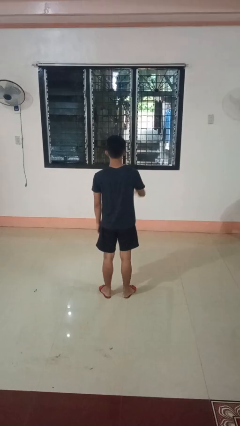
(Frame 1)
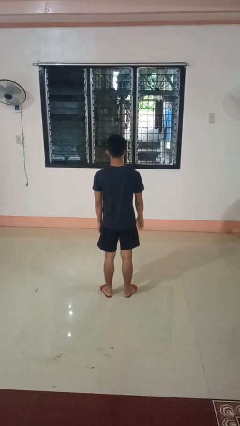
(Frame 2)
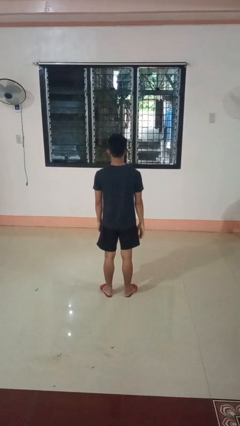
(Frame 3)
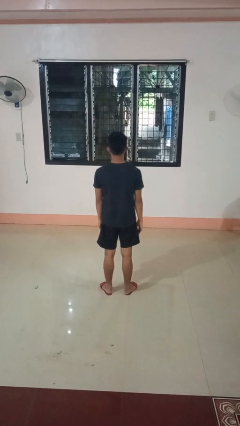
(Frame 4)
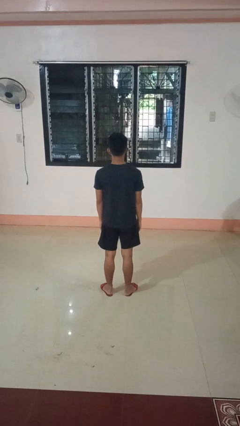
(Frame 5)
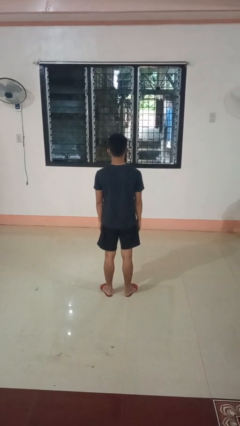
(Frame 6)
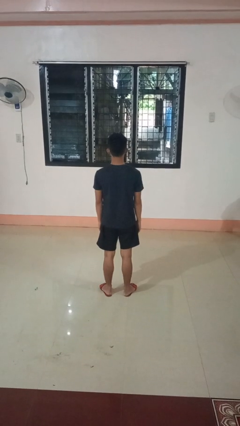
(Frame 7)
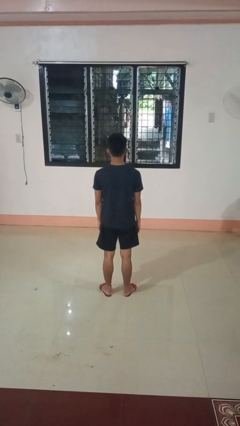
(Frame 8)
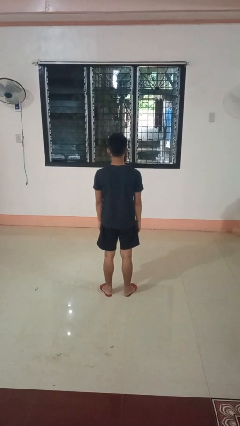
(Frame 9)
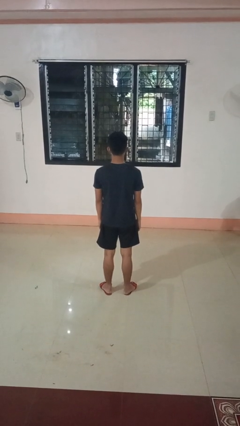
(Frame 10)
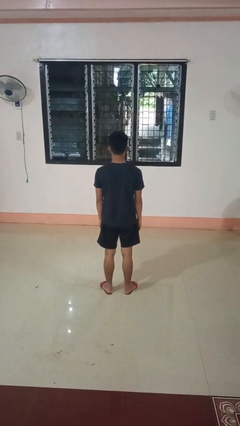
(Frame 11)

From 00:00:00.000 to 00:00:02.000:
person gestures swipe down

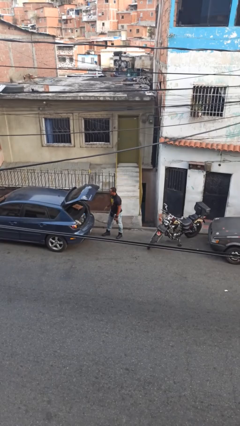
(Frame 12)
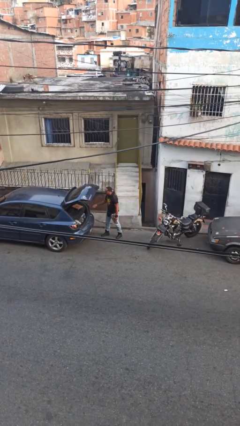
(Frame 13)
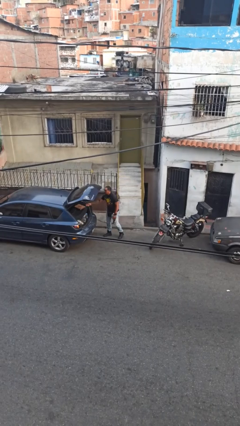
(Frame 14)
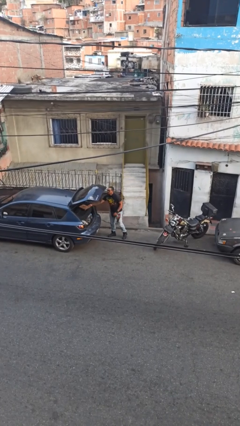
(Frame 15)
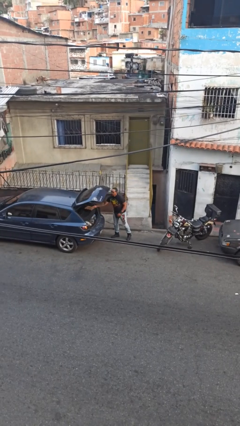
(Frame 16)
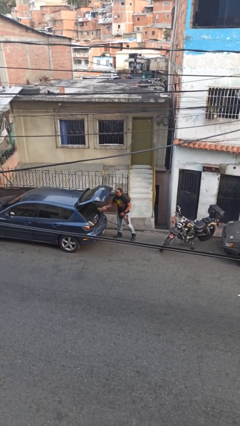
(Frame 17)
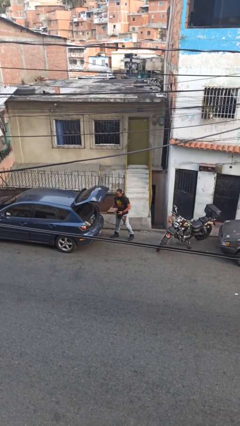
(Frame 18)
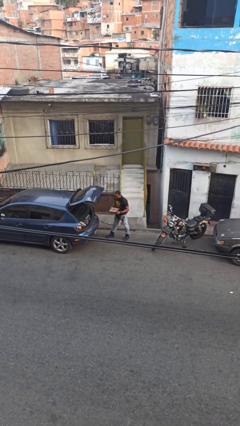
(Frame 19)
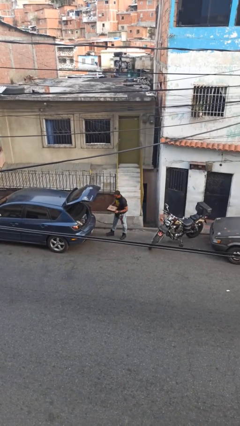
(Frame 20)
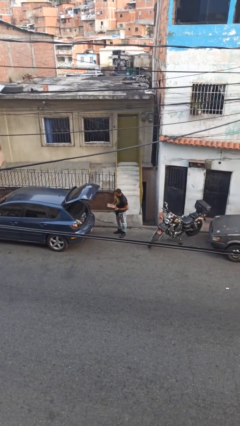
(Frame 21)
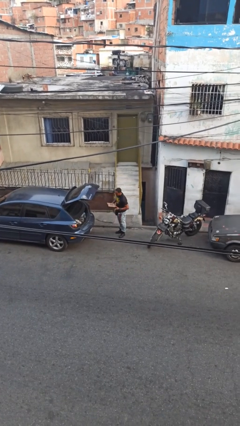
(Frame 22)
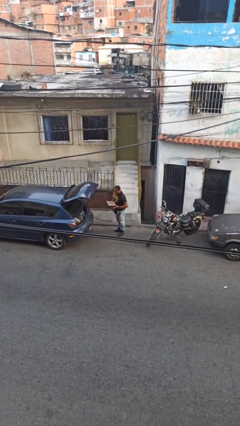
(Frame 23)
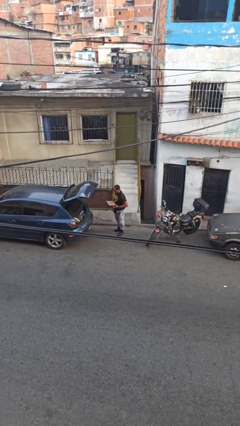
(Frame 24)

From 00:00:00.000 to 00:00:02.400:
person unloads car

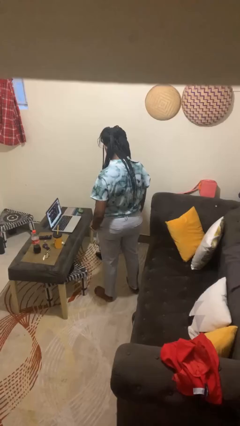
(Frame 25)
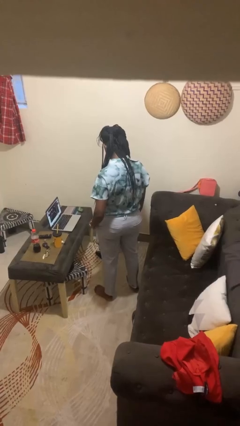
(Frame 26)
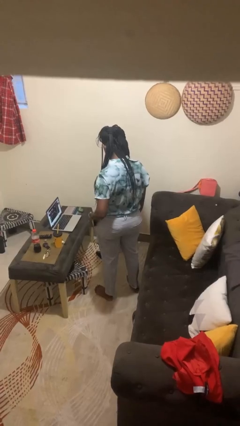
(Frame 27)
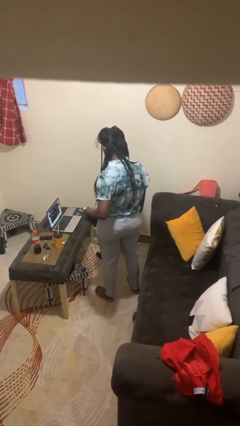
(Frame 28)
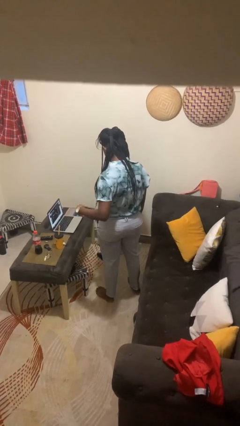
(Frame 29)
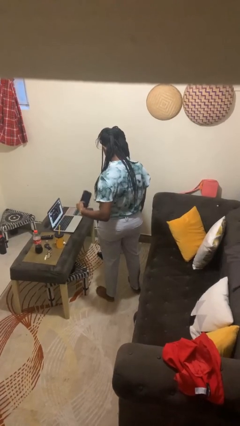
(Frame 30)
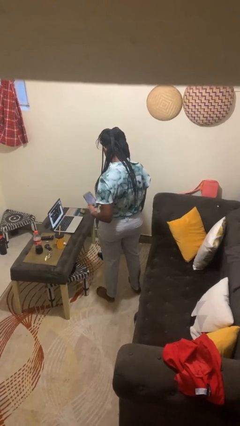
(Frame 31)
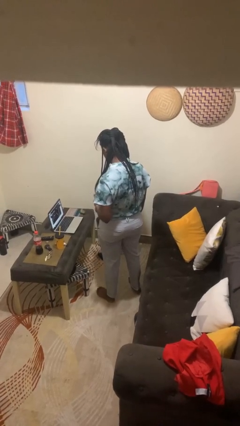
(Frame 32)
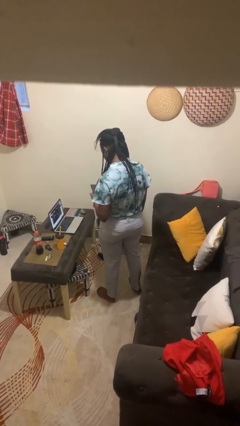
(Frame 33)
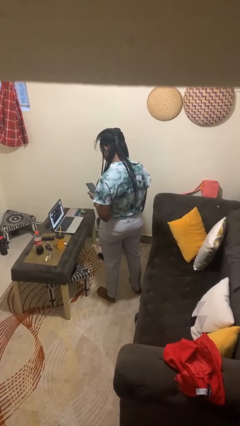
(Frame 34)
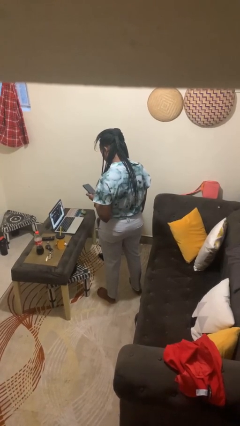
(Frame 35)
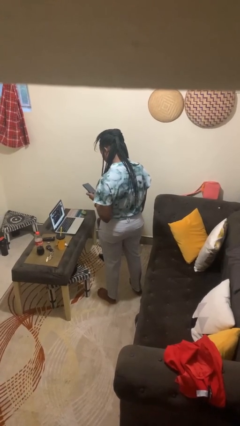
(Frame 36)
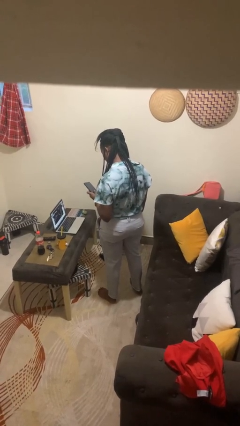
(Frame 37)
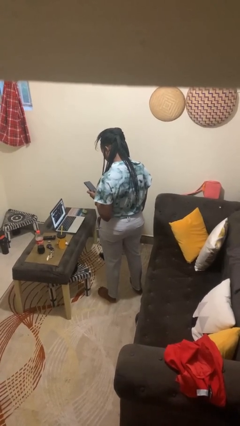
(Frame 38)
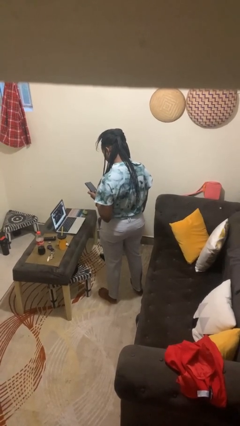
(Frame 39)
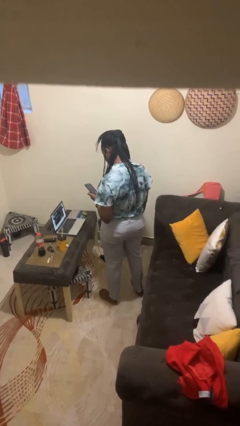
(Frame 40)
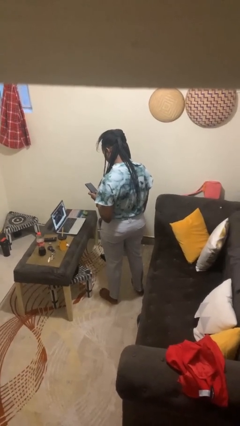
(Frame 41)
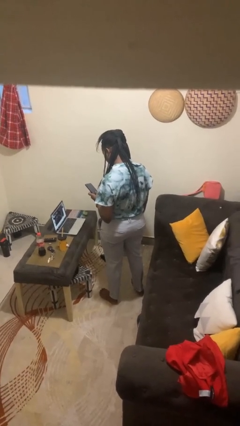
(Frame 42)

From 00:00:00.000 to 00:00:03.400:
person takes phone from pocket

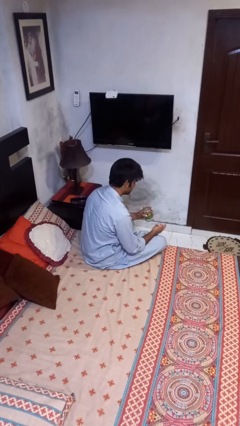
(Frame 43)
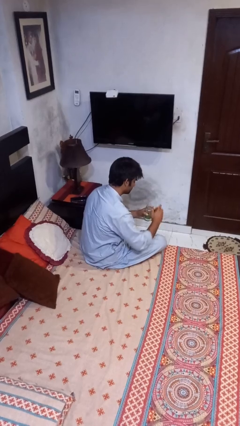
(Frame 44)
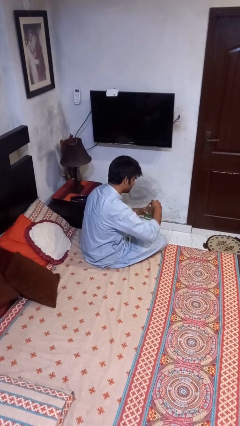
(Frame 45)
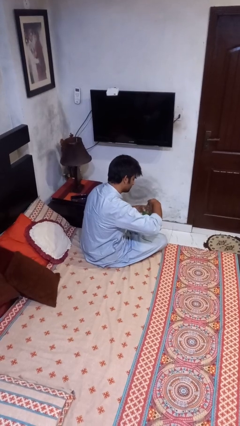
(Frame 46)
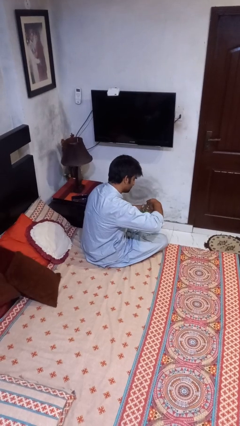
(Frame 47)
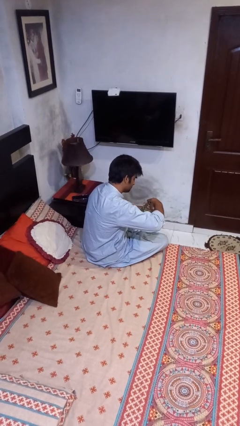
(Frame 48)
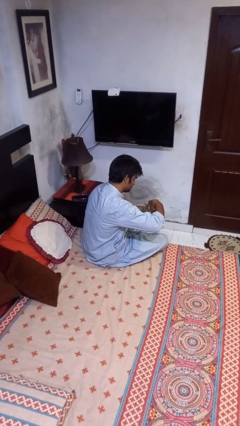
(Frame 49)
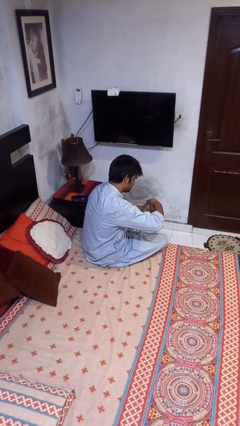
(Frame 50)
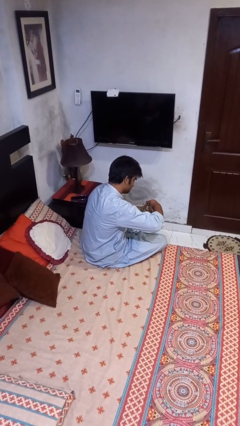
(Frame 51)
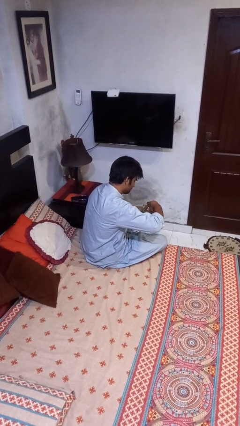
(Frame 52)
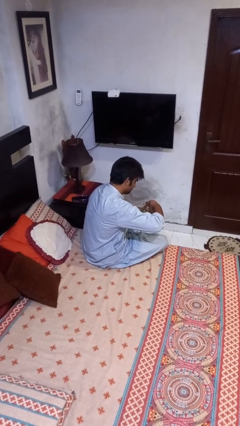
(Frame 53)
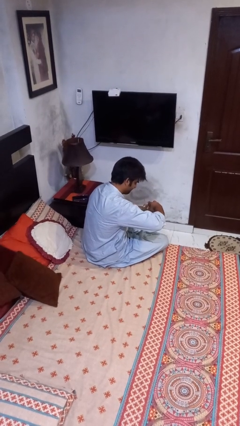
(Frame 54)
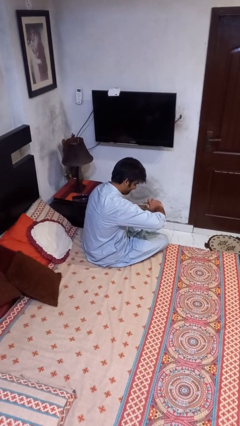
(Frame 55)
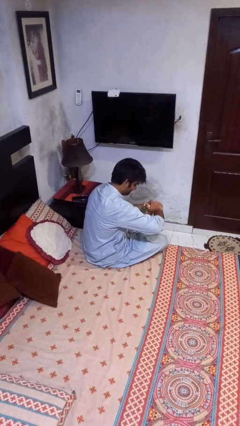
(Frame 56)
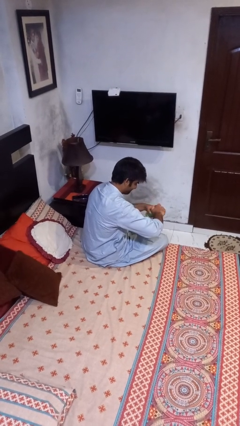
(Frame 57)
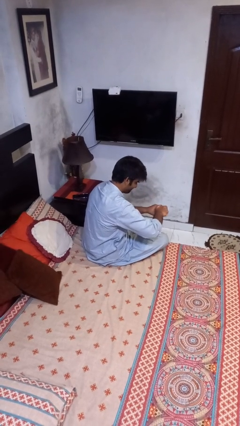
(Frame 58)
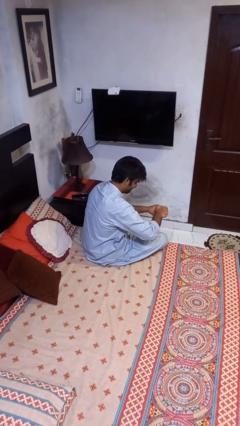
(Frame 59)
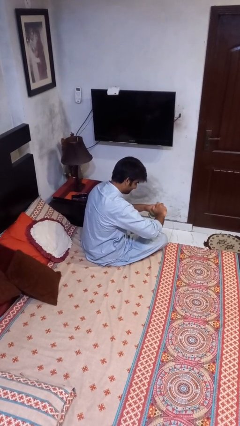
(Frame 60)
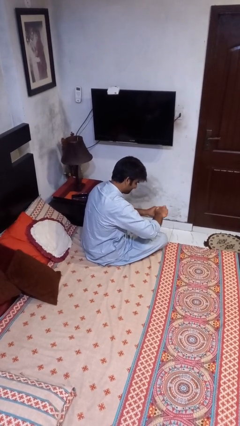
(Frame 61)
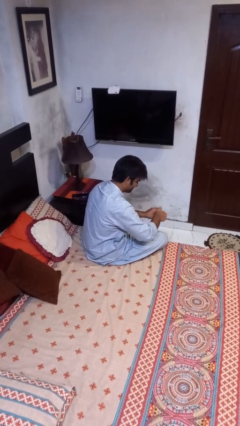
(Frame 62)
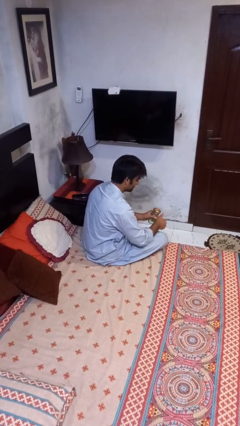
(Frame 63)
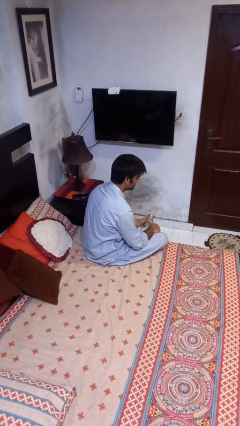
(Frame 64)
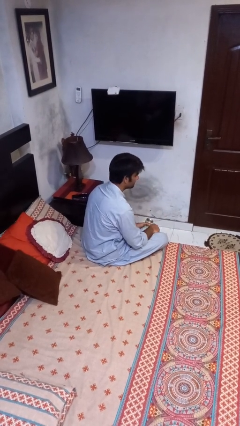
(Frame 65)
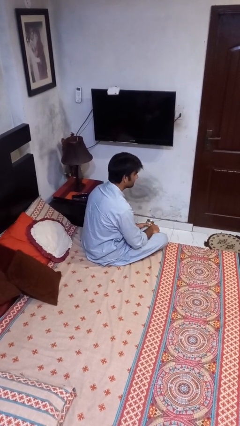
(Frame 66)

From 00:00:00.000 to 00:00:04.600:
person closes jar

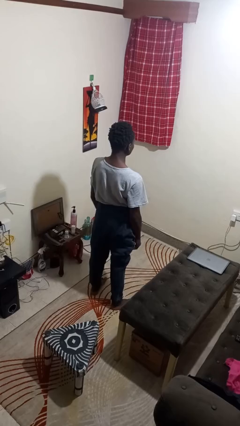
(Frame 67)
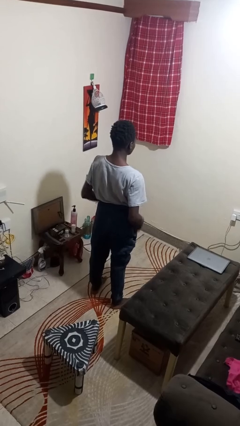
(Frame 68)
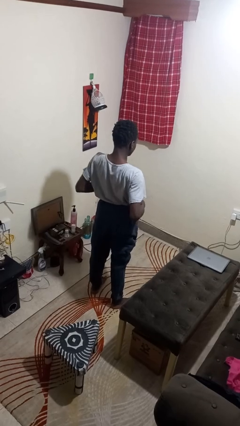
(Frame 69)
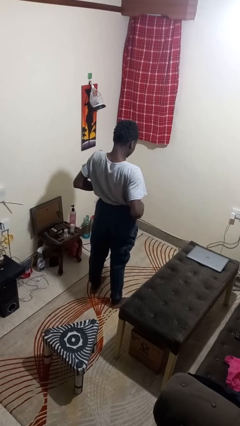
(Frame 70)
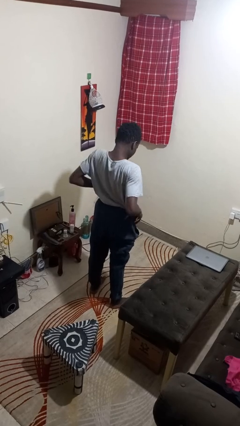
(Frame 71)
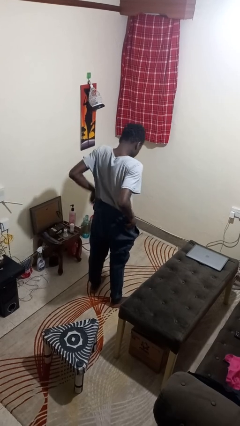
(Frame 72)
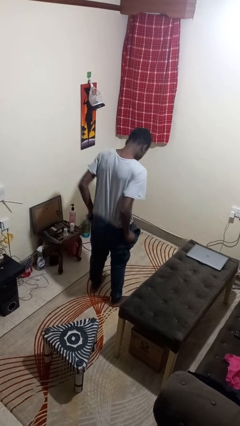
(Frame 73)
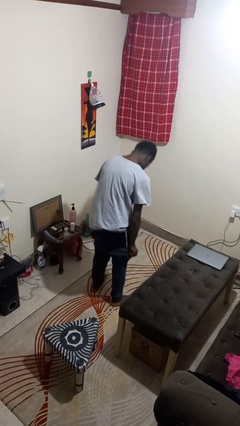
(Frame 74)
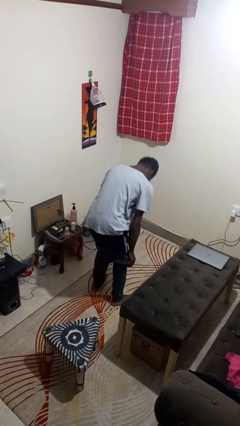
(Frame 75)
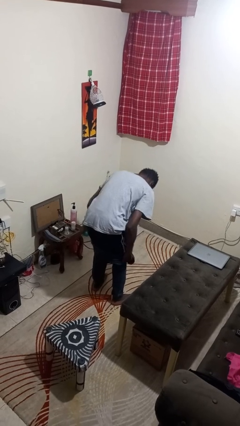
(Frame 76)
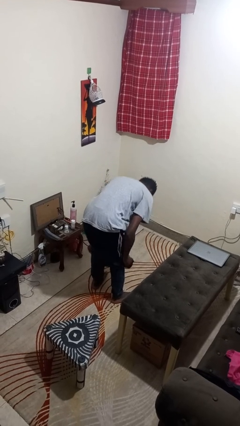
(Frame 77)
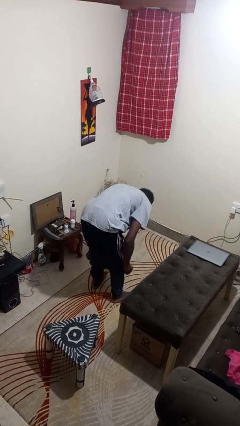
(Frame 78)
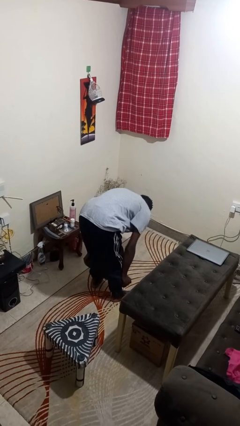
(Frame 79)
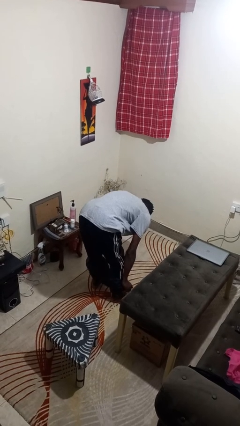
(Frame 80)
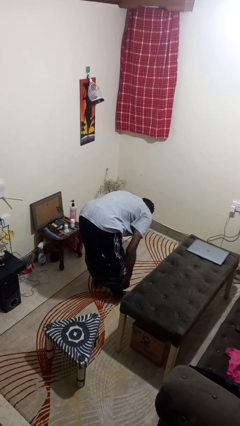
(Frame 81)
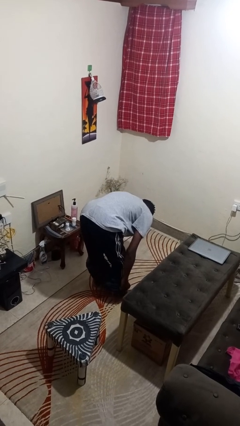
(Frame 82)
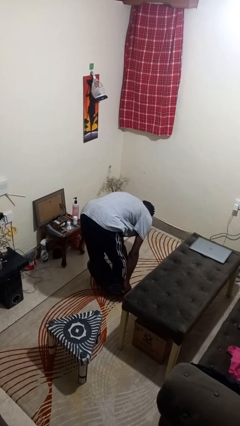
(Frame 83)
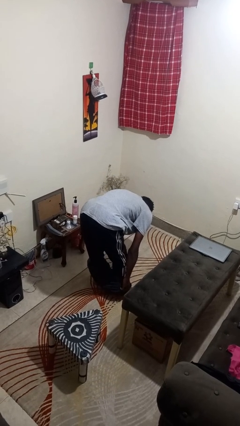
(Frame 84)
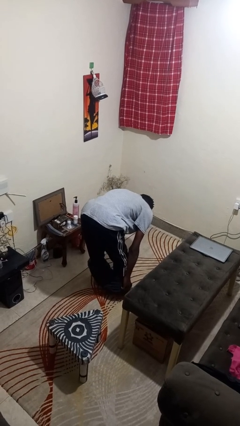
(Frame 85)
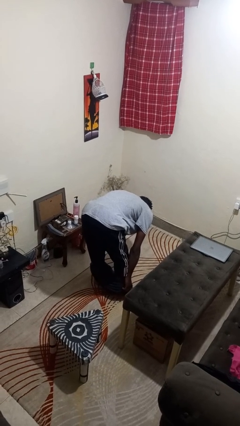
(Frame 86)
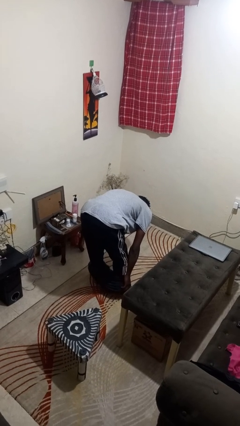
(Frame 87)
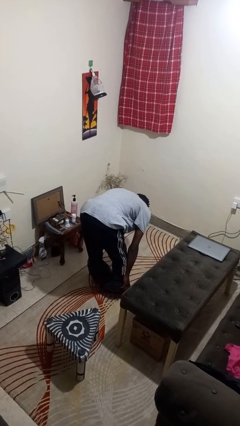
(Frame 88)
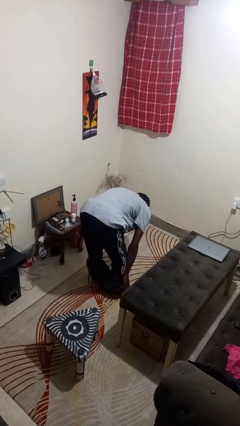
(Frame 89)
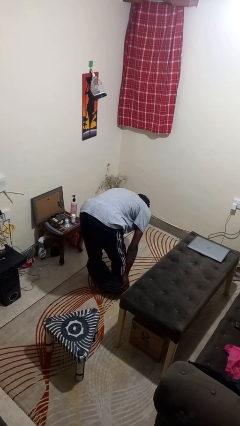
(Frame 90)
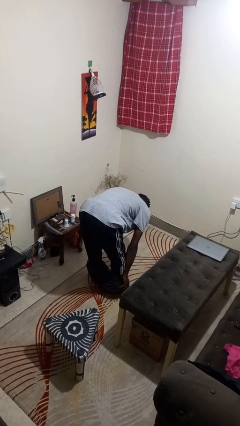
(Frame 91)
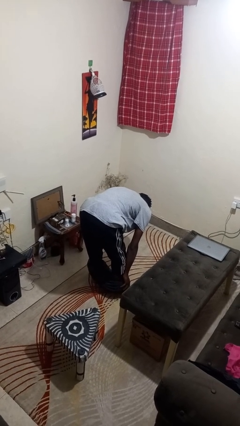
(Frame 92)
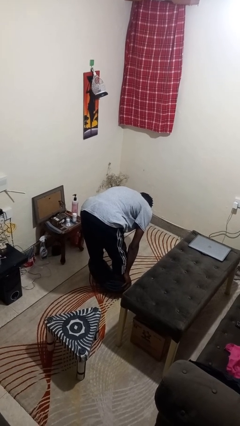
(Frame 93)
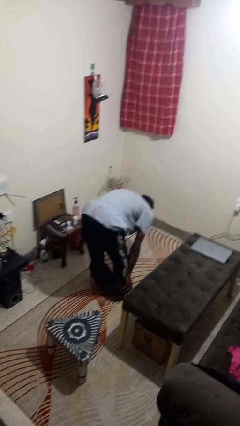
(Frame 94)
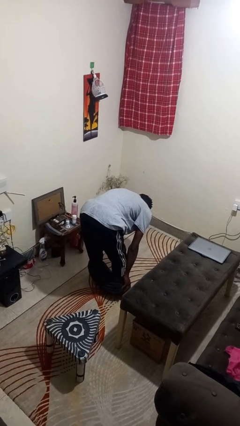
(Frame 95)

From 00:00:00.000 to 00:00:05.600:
person takes off pants
